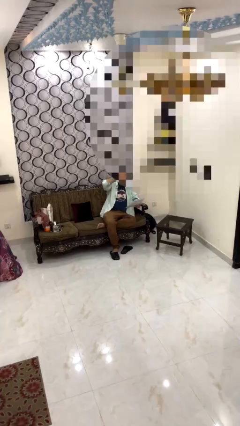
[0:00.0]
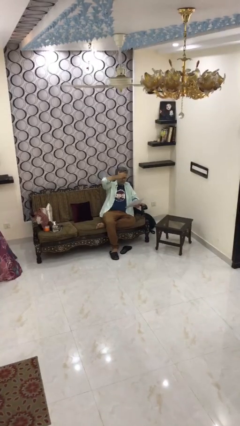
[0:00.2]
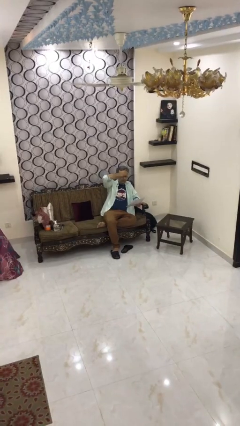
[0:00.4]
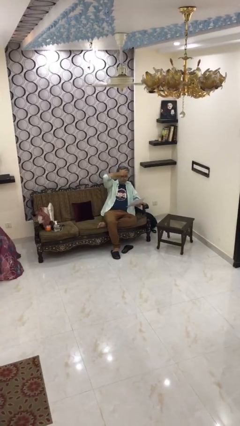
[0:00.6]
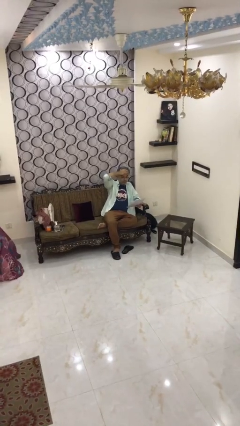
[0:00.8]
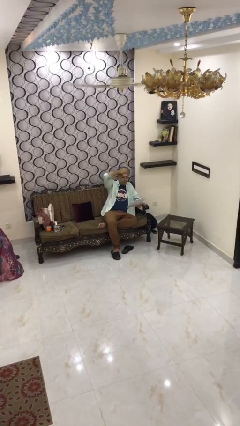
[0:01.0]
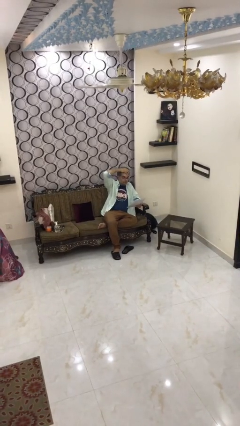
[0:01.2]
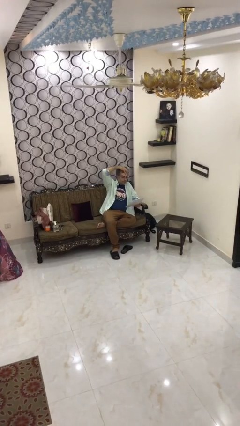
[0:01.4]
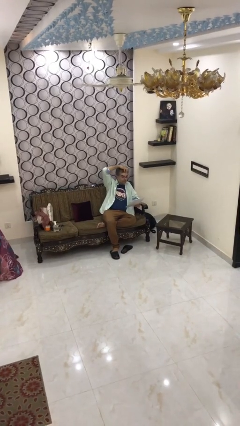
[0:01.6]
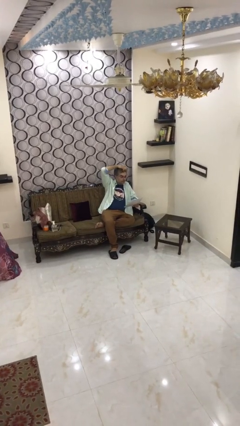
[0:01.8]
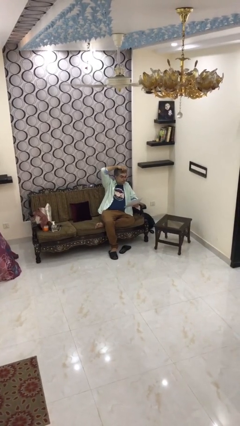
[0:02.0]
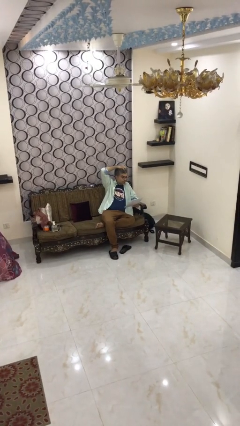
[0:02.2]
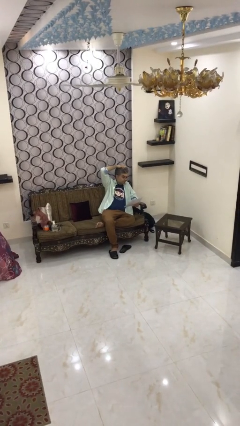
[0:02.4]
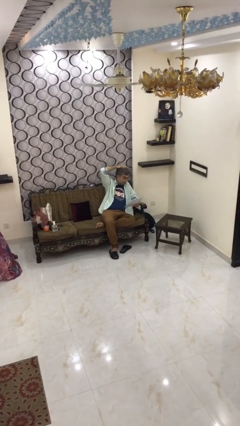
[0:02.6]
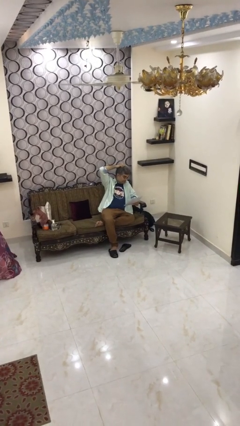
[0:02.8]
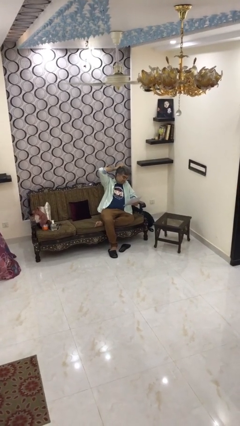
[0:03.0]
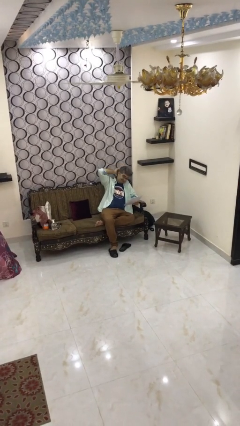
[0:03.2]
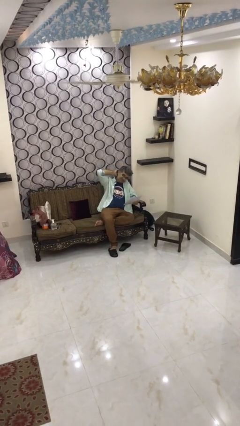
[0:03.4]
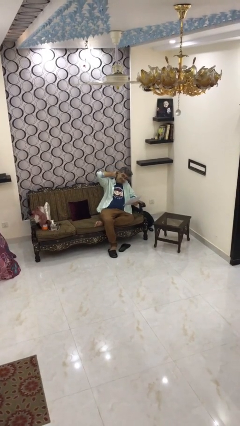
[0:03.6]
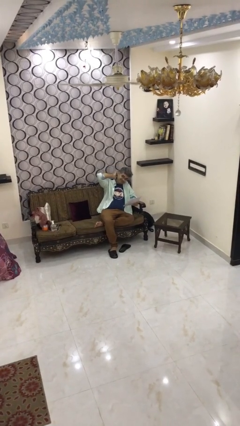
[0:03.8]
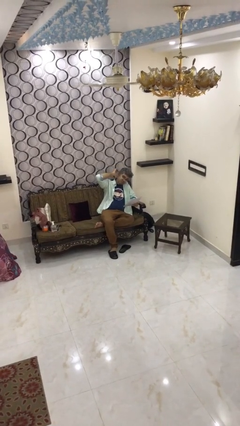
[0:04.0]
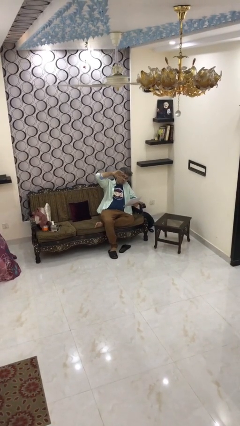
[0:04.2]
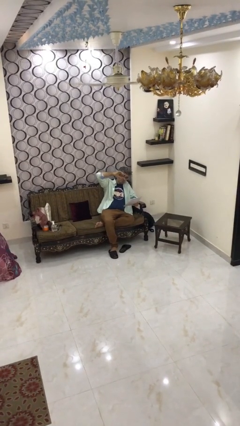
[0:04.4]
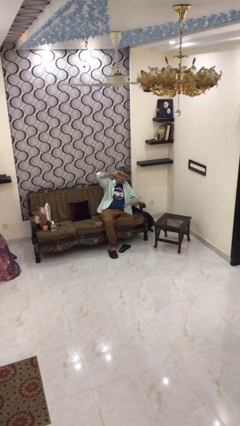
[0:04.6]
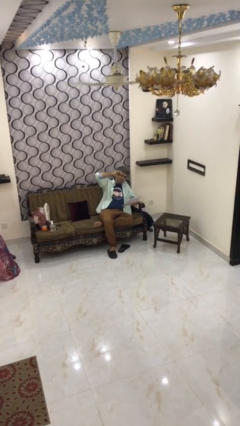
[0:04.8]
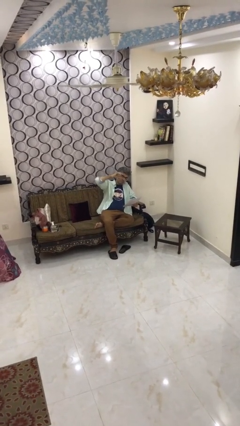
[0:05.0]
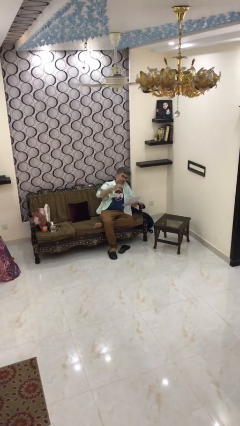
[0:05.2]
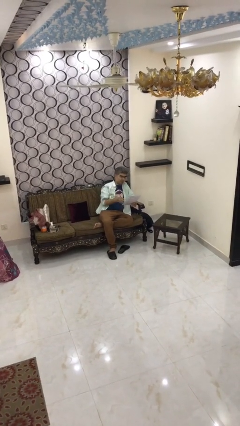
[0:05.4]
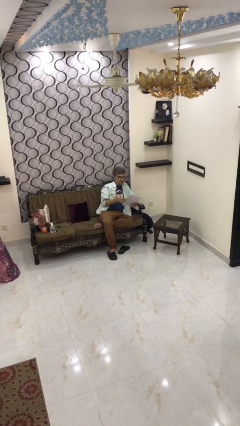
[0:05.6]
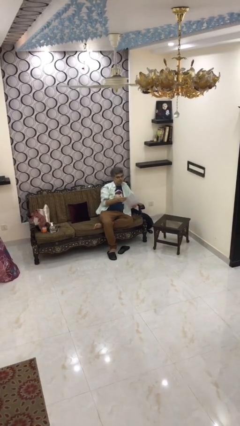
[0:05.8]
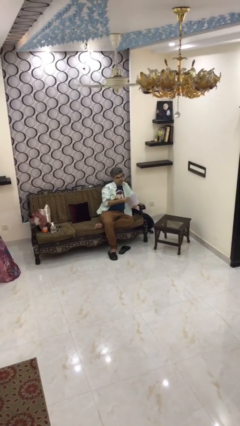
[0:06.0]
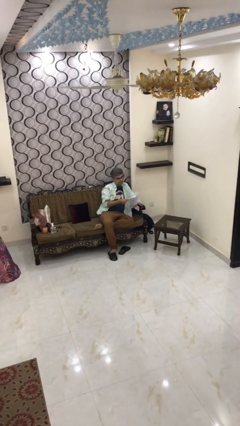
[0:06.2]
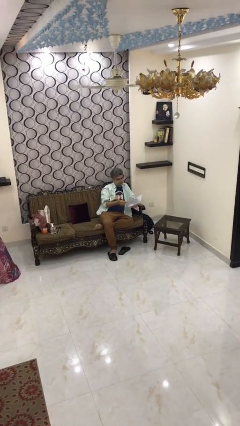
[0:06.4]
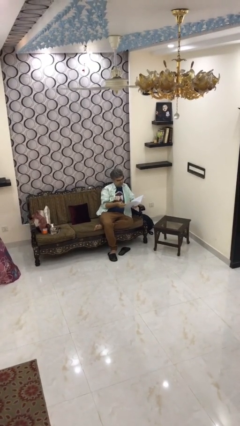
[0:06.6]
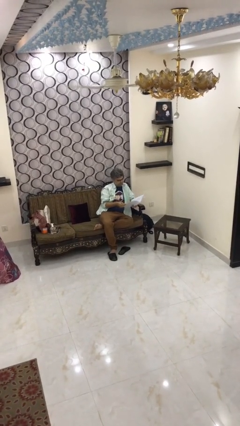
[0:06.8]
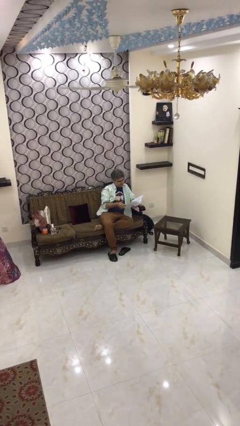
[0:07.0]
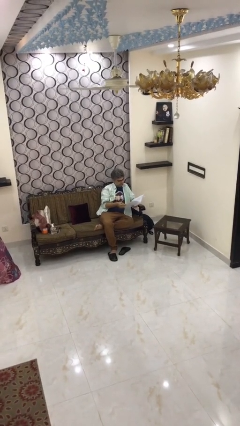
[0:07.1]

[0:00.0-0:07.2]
person reads document

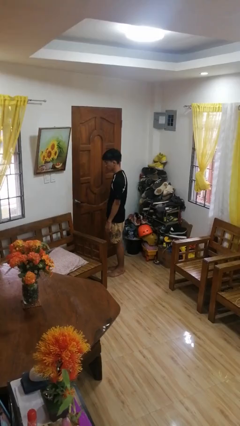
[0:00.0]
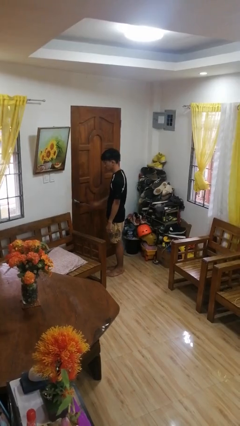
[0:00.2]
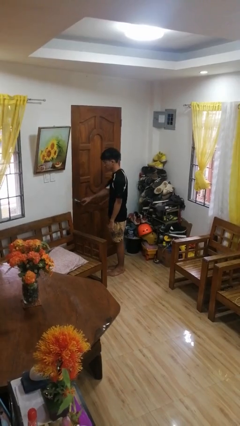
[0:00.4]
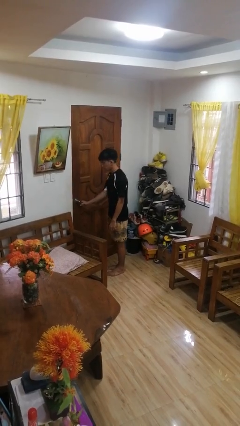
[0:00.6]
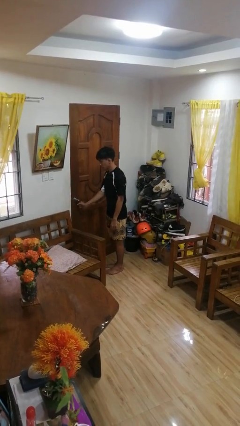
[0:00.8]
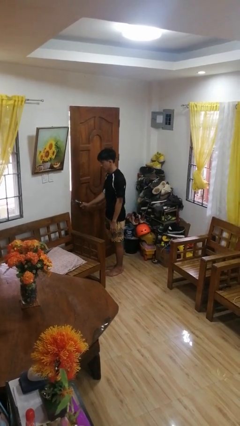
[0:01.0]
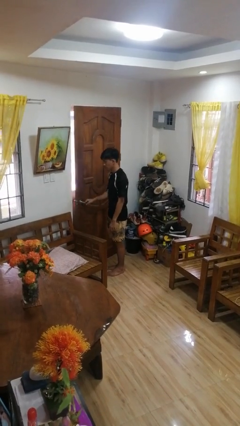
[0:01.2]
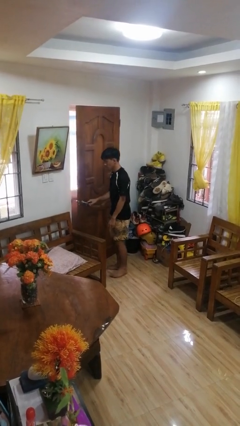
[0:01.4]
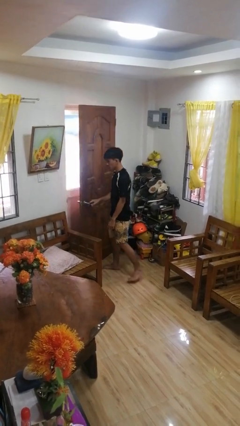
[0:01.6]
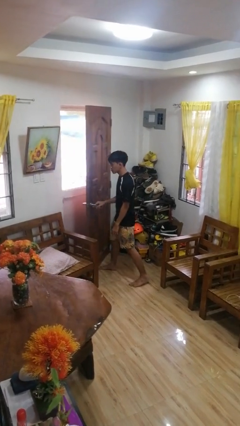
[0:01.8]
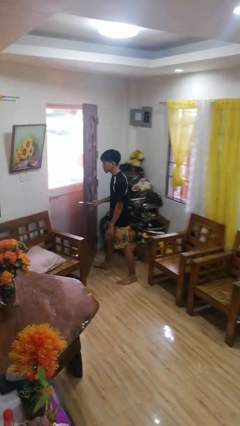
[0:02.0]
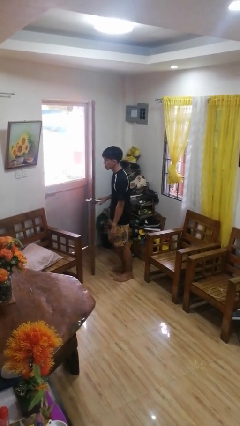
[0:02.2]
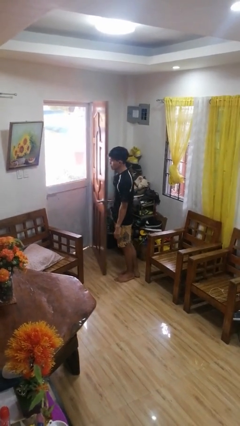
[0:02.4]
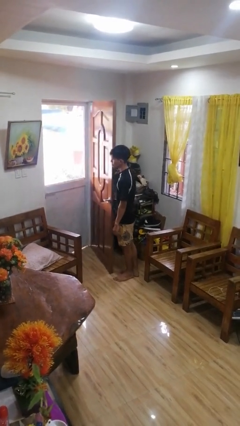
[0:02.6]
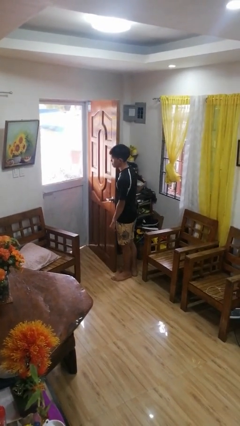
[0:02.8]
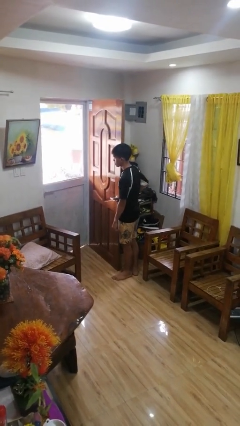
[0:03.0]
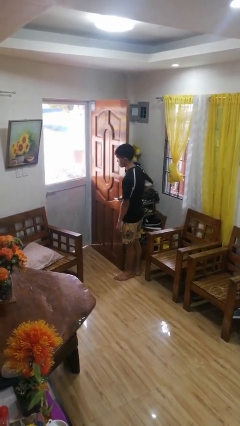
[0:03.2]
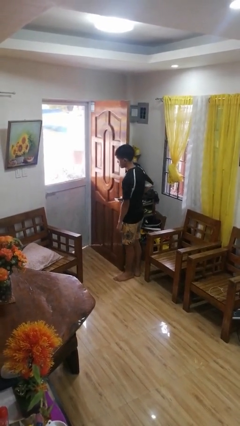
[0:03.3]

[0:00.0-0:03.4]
person opens facility door

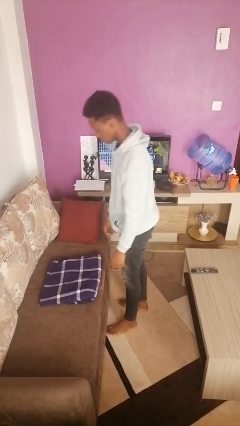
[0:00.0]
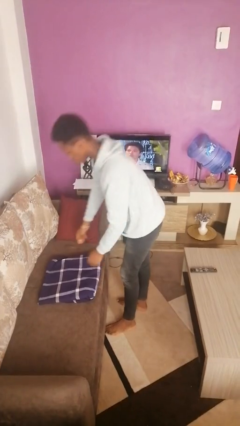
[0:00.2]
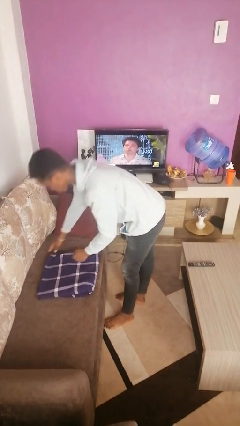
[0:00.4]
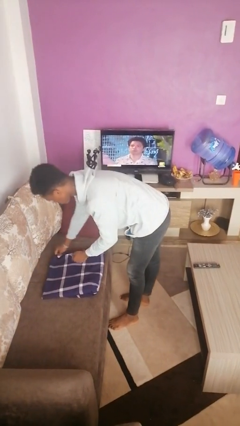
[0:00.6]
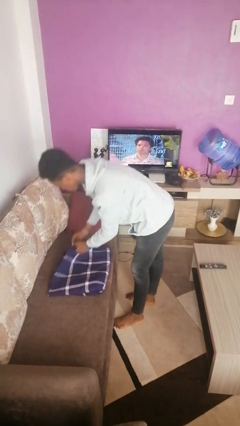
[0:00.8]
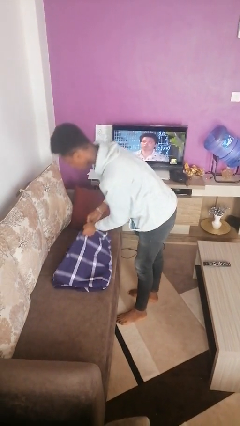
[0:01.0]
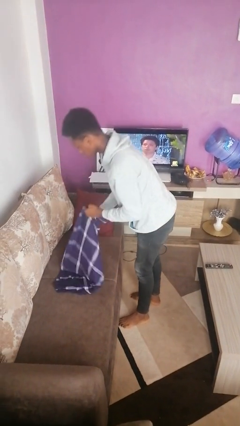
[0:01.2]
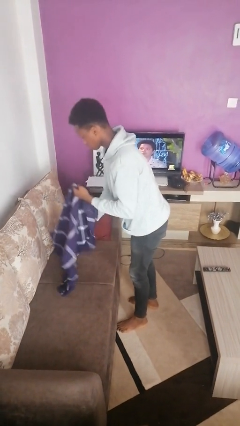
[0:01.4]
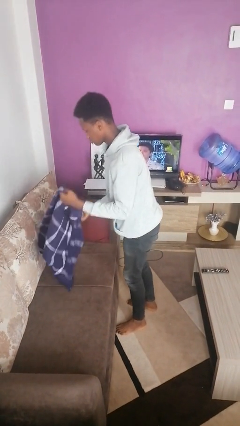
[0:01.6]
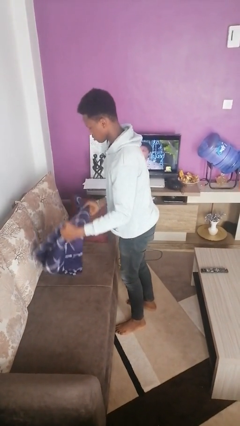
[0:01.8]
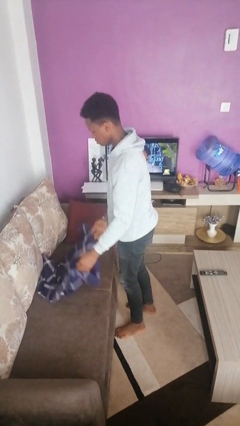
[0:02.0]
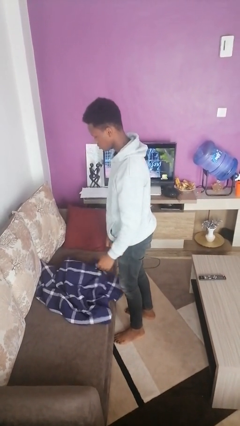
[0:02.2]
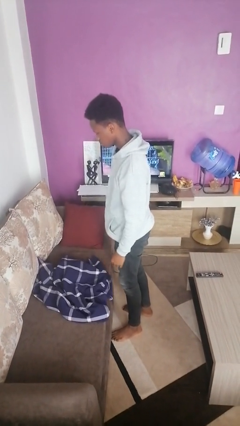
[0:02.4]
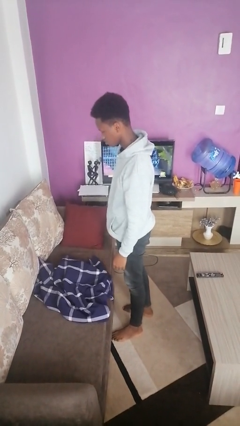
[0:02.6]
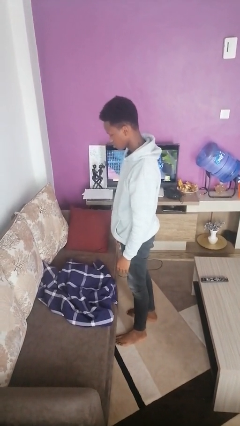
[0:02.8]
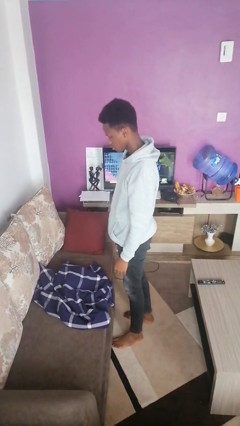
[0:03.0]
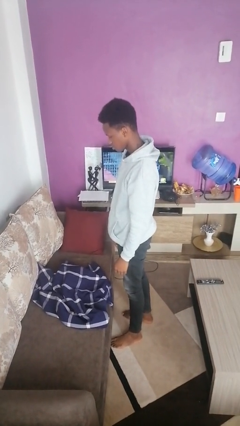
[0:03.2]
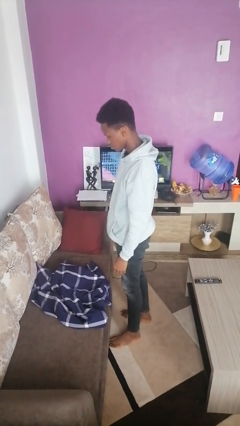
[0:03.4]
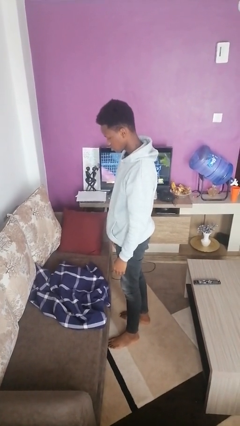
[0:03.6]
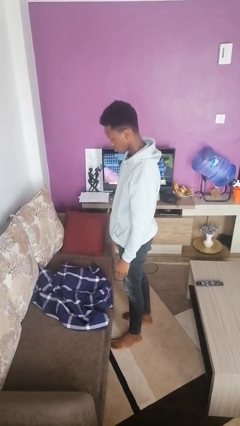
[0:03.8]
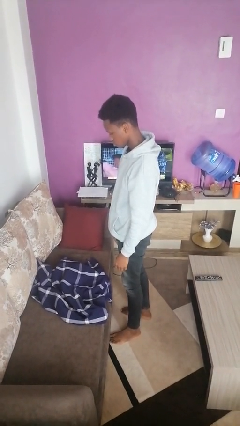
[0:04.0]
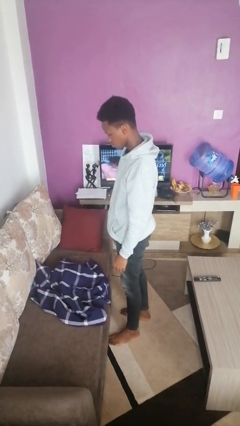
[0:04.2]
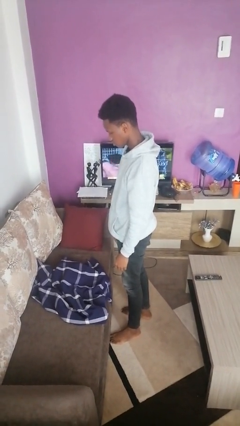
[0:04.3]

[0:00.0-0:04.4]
person unfolds blanket

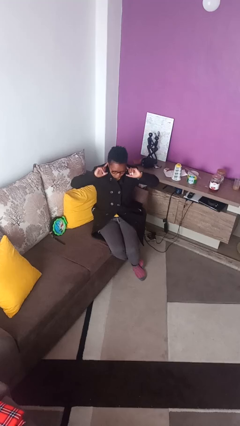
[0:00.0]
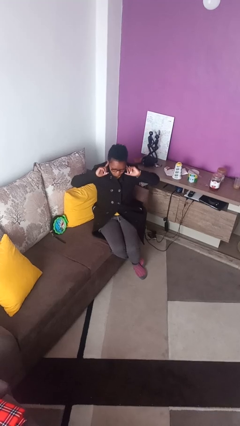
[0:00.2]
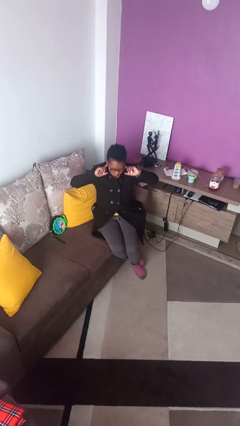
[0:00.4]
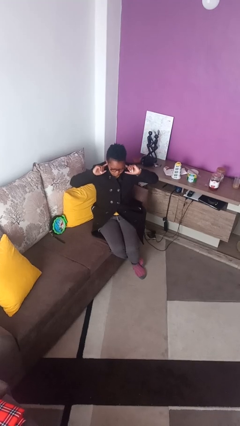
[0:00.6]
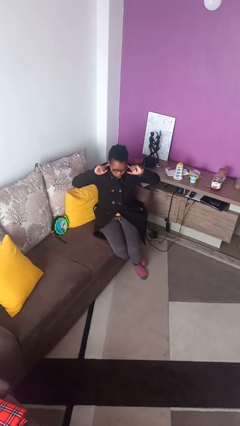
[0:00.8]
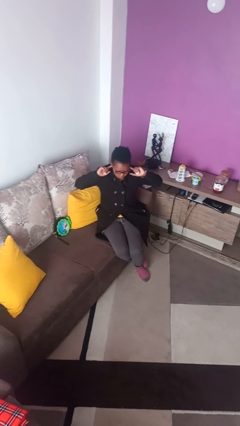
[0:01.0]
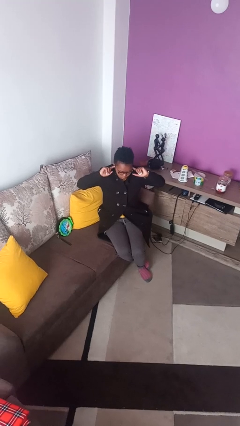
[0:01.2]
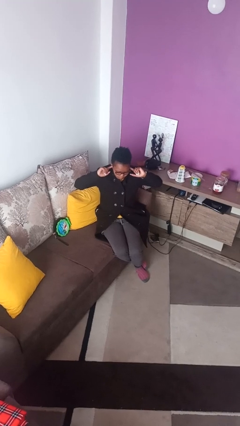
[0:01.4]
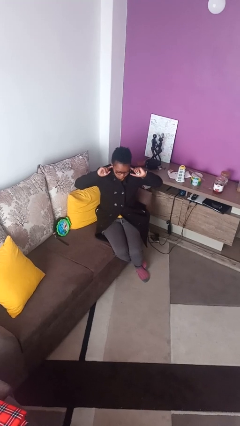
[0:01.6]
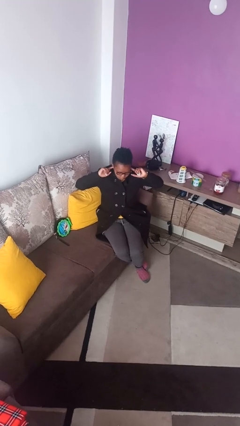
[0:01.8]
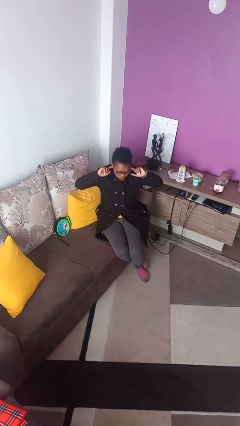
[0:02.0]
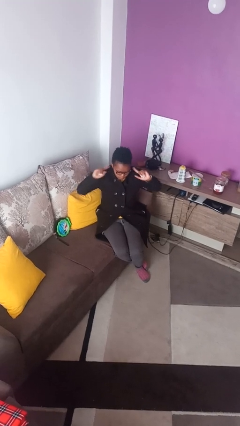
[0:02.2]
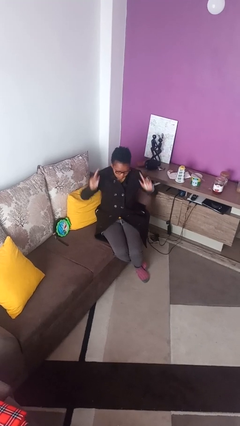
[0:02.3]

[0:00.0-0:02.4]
person puts fingers in ear

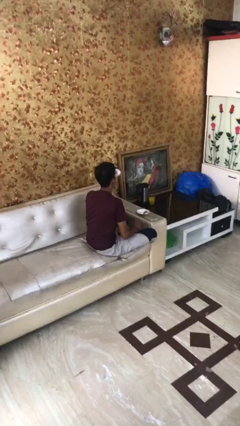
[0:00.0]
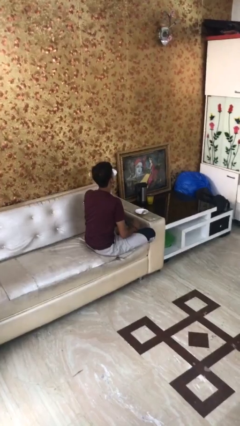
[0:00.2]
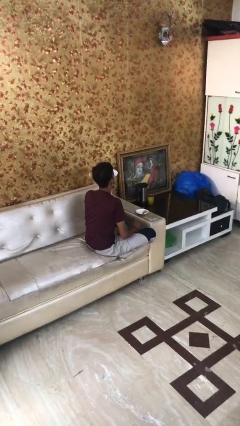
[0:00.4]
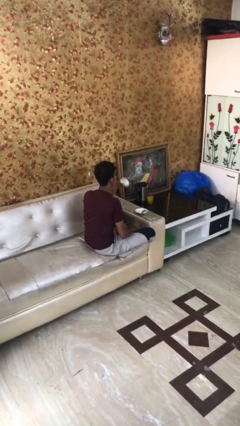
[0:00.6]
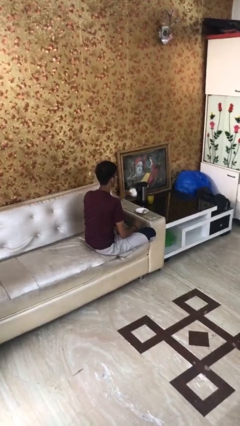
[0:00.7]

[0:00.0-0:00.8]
person drinks from mug
